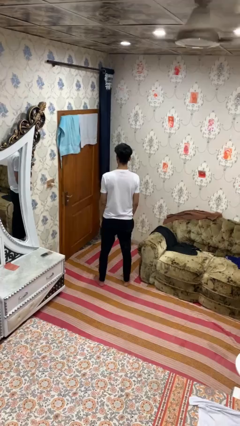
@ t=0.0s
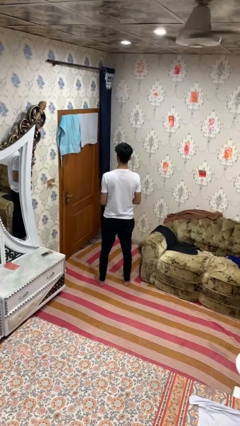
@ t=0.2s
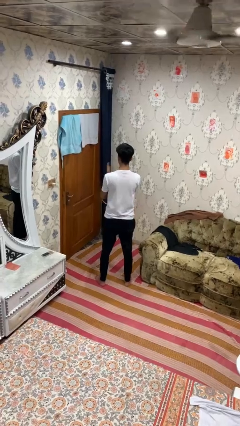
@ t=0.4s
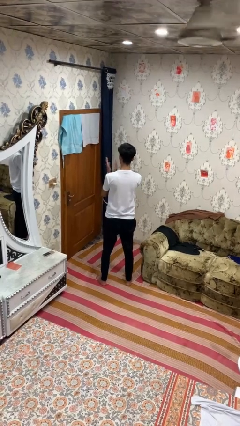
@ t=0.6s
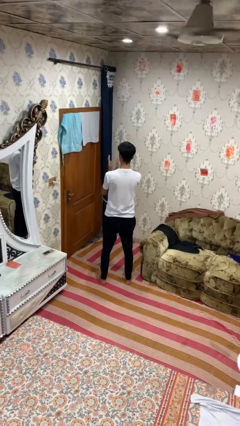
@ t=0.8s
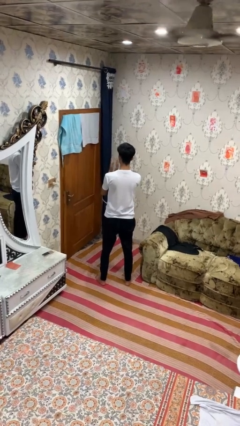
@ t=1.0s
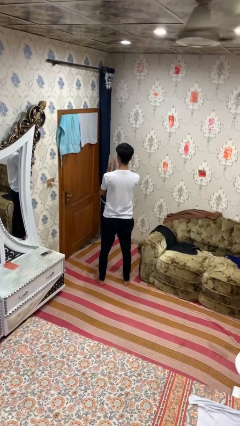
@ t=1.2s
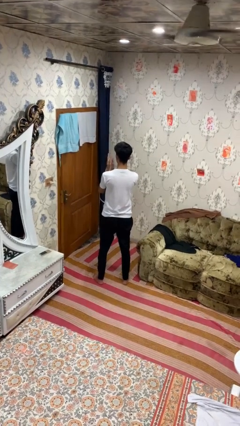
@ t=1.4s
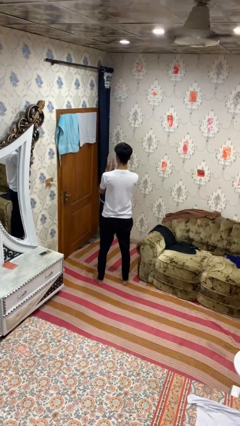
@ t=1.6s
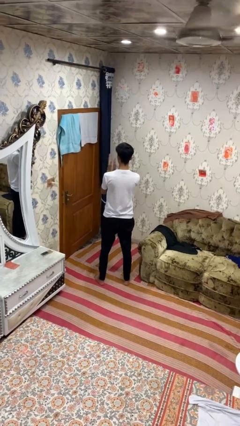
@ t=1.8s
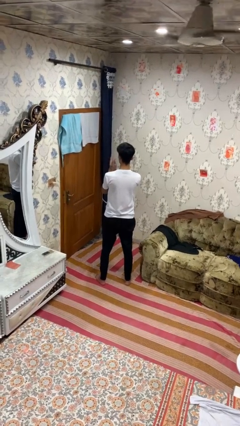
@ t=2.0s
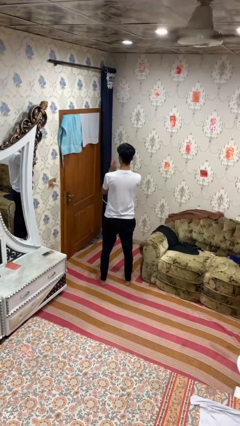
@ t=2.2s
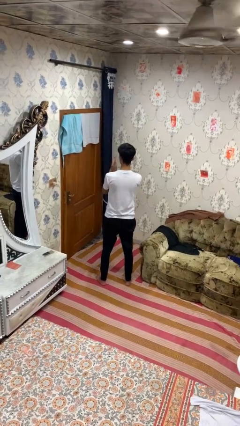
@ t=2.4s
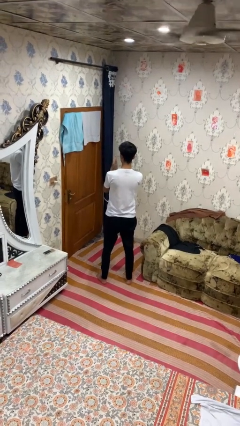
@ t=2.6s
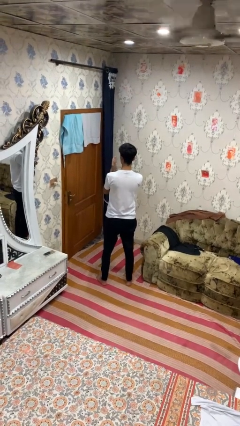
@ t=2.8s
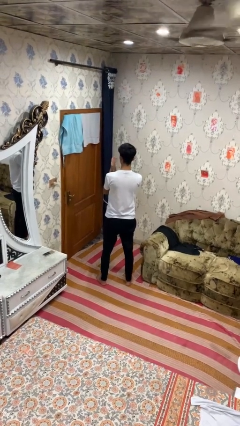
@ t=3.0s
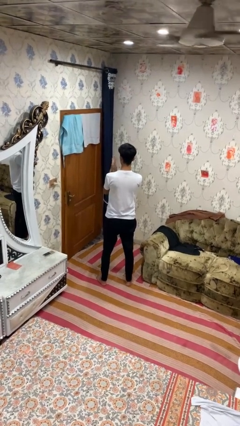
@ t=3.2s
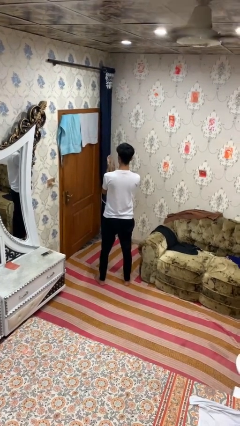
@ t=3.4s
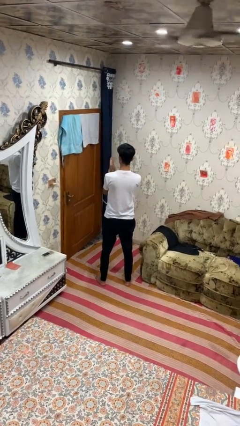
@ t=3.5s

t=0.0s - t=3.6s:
person claps hands

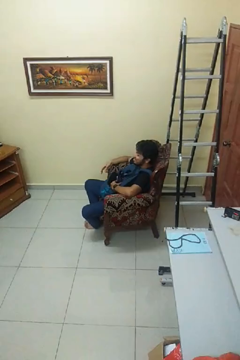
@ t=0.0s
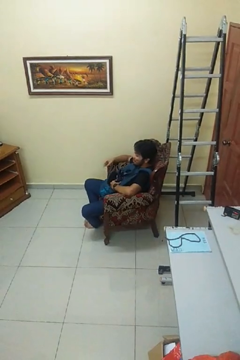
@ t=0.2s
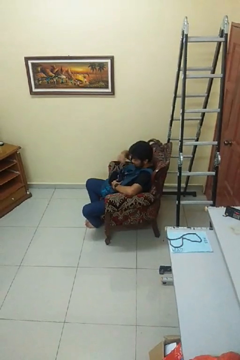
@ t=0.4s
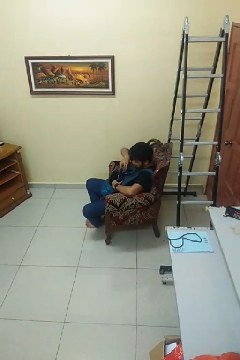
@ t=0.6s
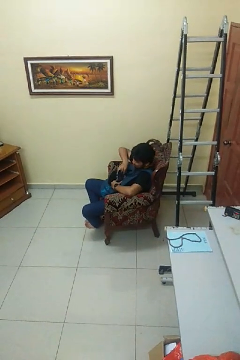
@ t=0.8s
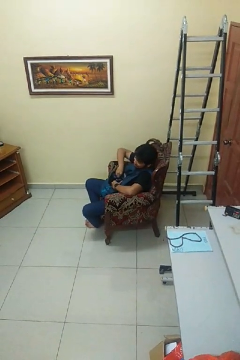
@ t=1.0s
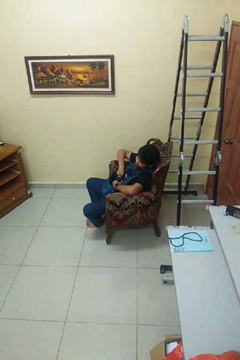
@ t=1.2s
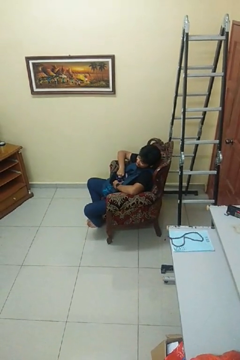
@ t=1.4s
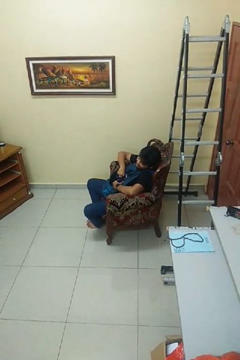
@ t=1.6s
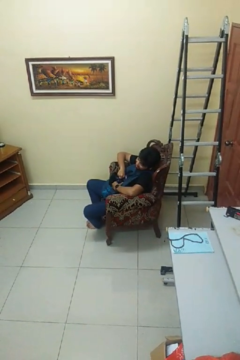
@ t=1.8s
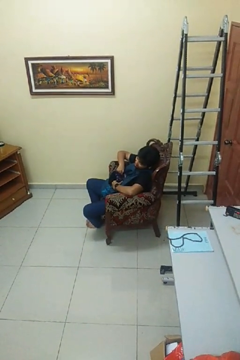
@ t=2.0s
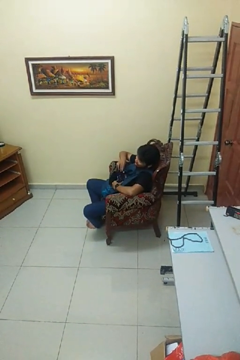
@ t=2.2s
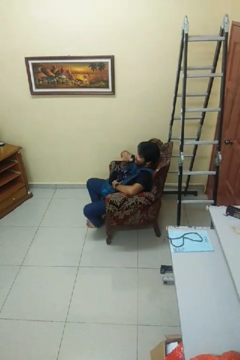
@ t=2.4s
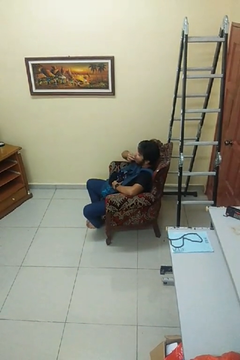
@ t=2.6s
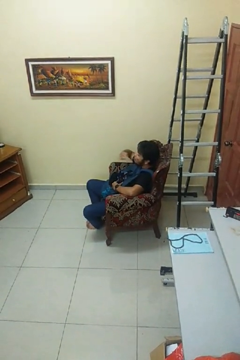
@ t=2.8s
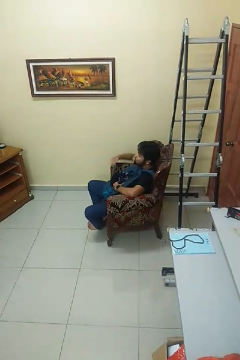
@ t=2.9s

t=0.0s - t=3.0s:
person eats snack from bag

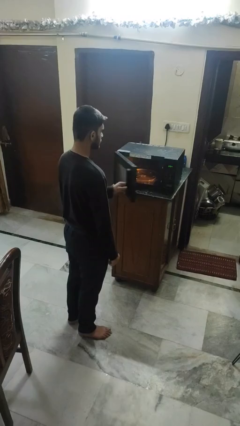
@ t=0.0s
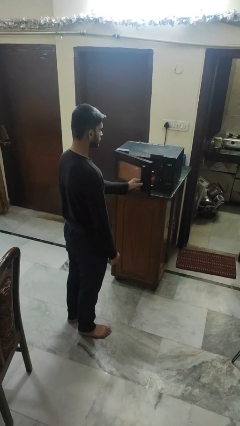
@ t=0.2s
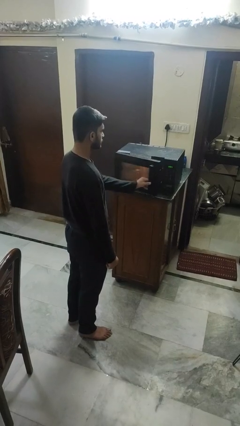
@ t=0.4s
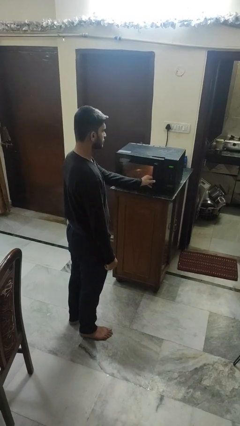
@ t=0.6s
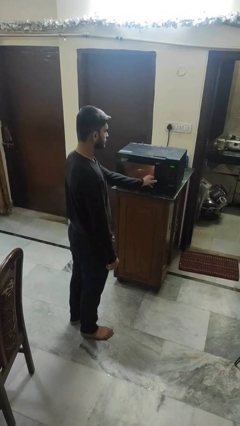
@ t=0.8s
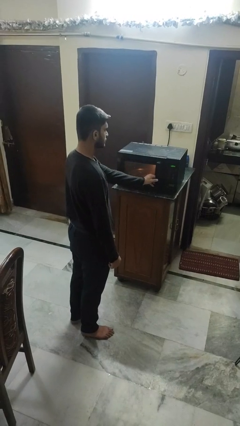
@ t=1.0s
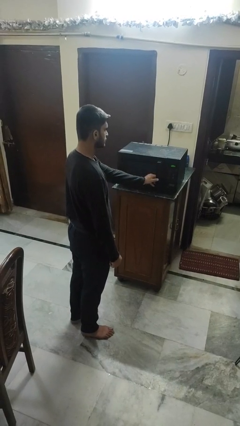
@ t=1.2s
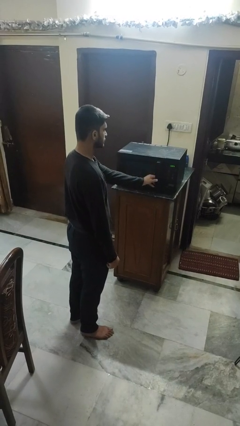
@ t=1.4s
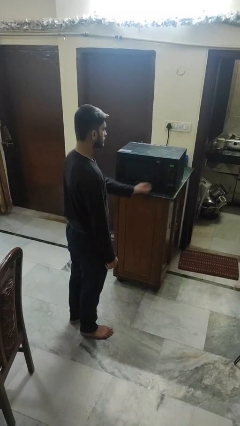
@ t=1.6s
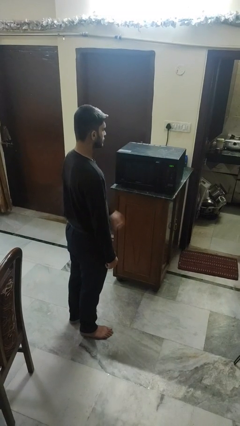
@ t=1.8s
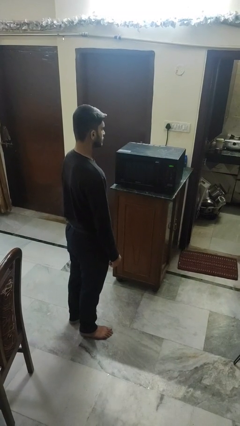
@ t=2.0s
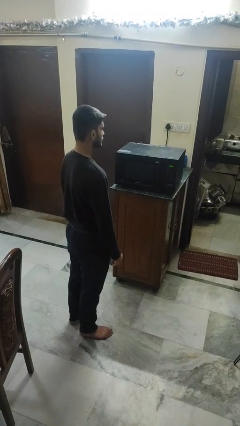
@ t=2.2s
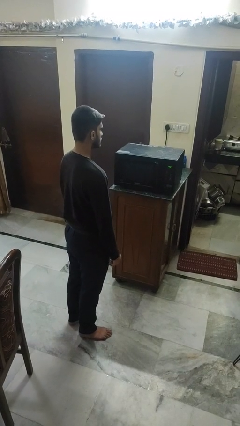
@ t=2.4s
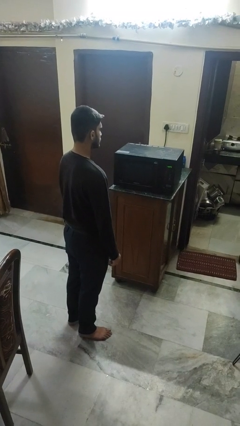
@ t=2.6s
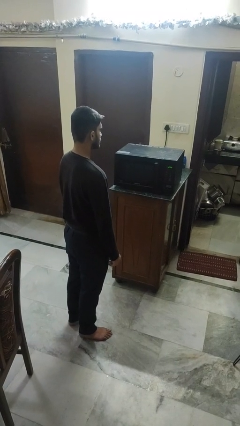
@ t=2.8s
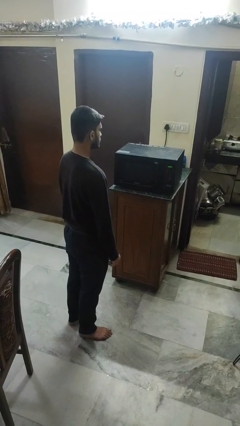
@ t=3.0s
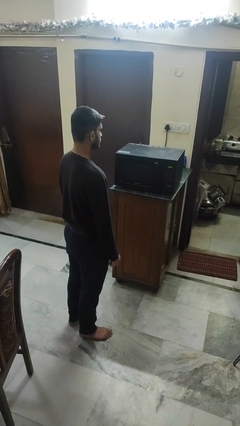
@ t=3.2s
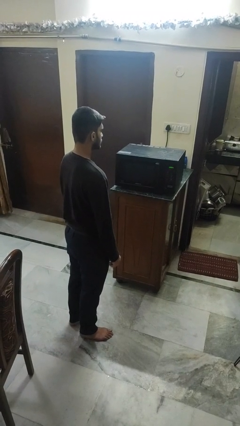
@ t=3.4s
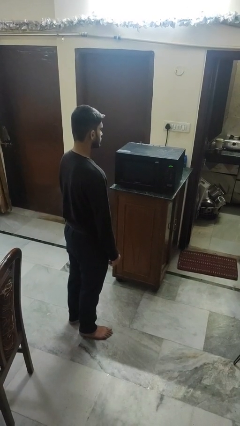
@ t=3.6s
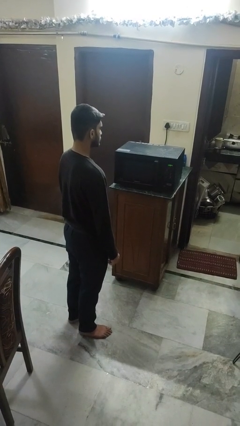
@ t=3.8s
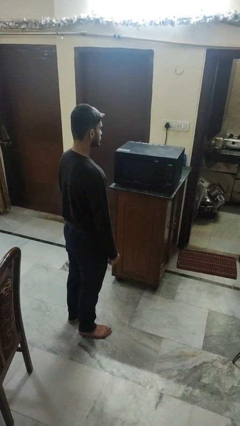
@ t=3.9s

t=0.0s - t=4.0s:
person closes oven door

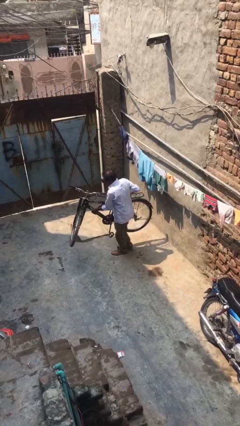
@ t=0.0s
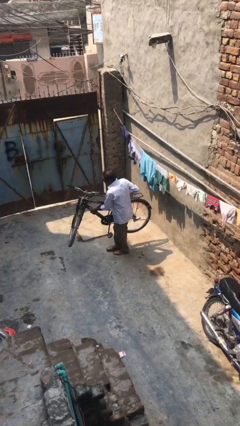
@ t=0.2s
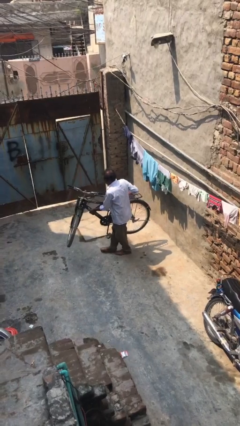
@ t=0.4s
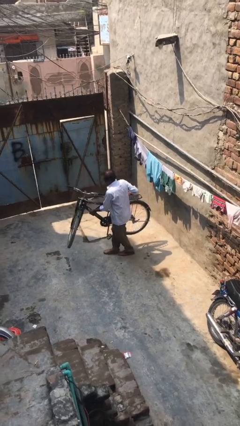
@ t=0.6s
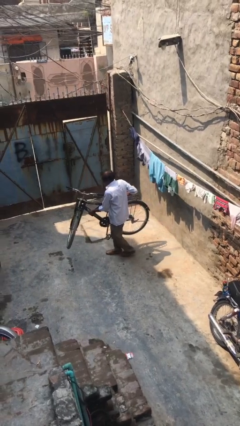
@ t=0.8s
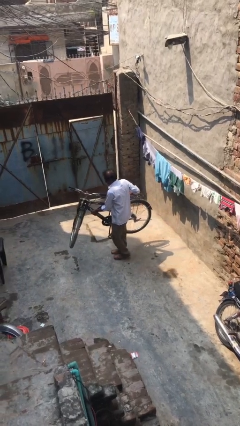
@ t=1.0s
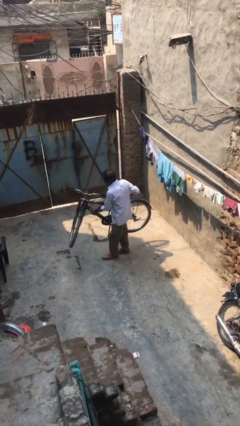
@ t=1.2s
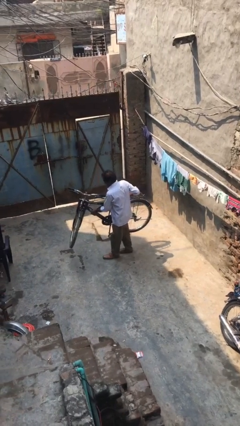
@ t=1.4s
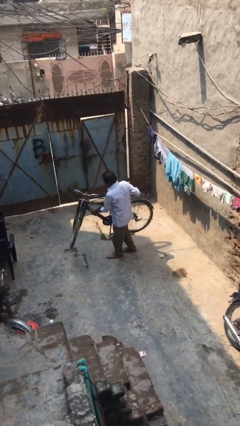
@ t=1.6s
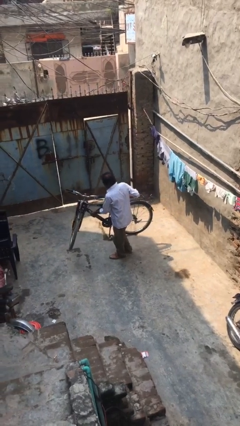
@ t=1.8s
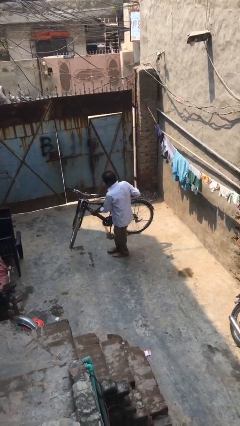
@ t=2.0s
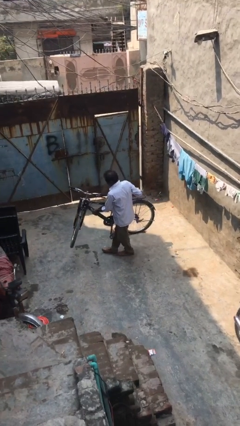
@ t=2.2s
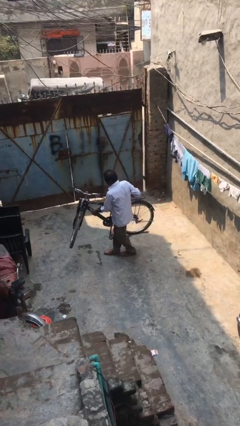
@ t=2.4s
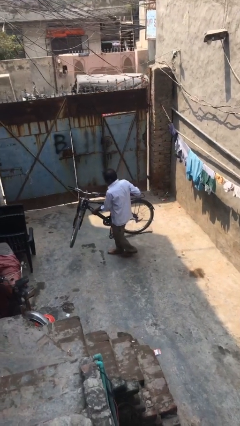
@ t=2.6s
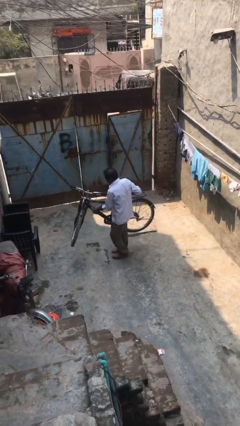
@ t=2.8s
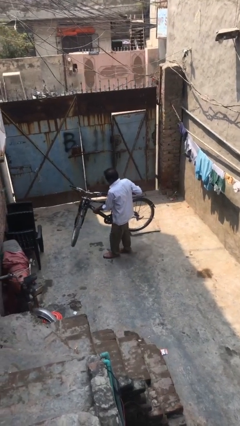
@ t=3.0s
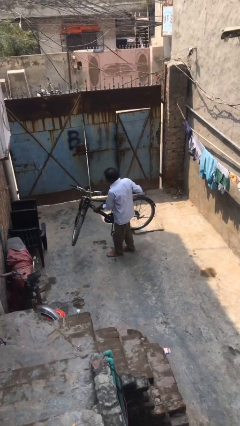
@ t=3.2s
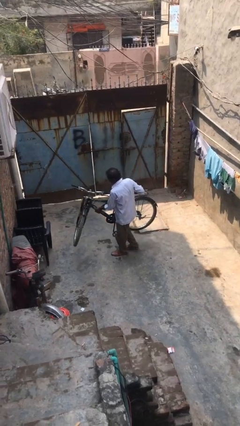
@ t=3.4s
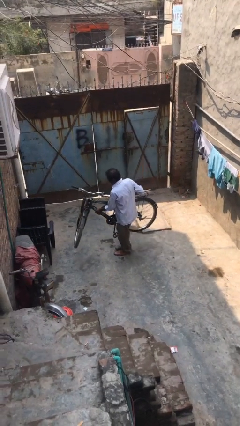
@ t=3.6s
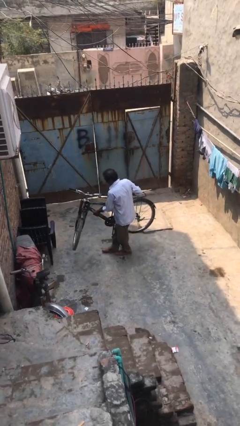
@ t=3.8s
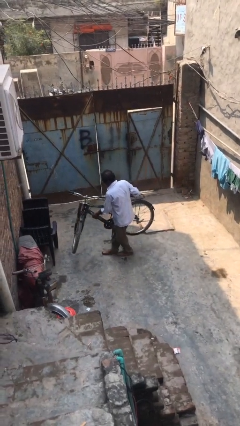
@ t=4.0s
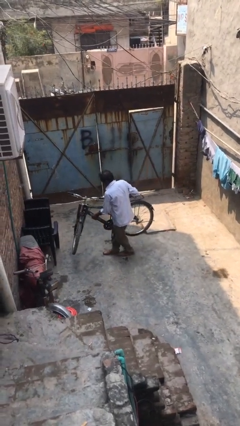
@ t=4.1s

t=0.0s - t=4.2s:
person carries heavy object

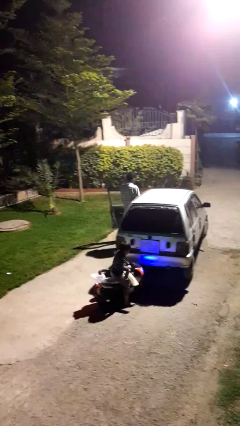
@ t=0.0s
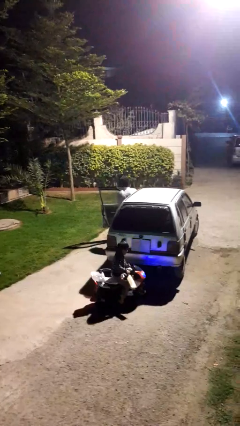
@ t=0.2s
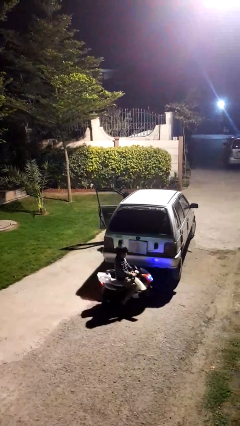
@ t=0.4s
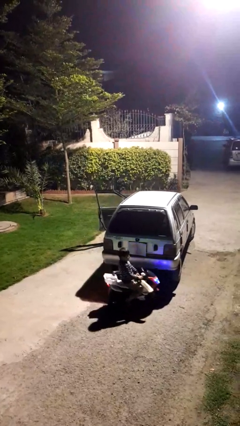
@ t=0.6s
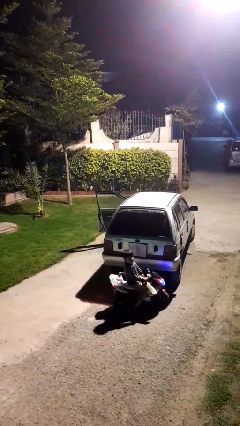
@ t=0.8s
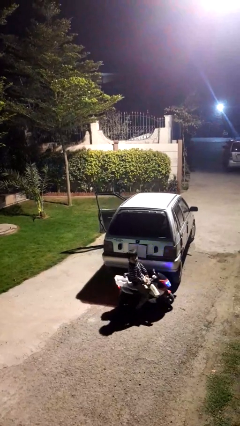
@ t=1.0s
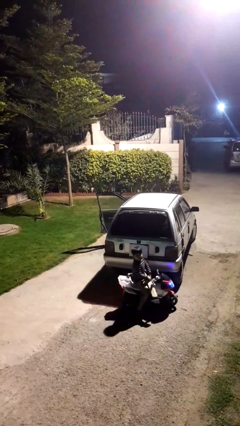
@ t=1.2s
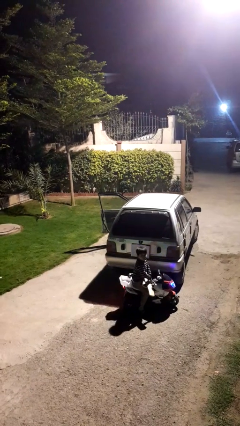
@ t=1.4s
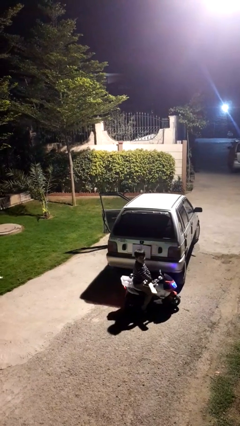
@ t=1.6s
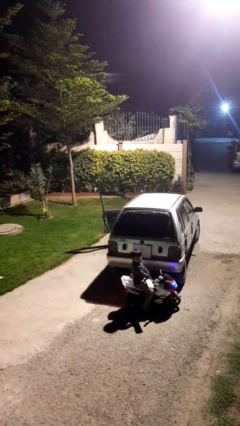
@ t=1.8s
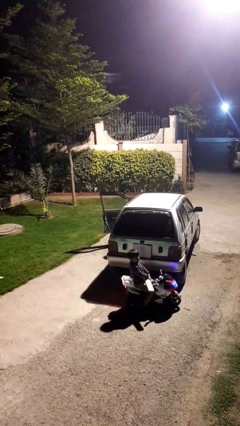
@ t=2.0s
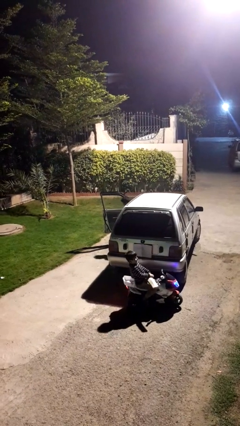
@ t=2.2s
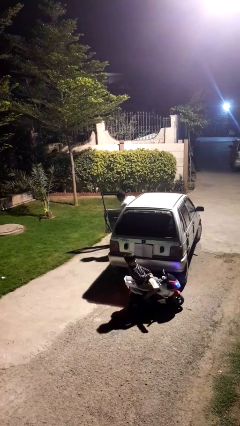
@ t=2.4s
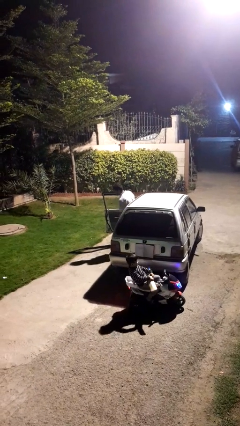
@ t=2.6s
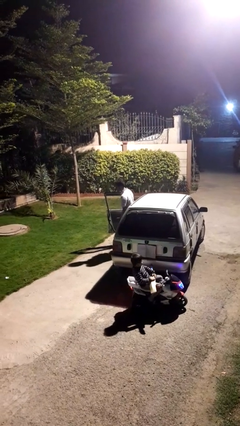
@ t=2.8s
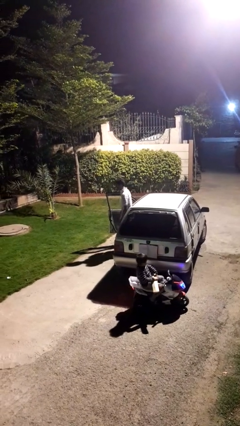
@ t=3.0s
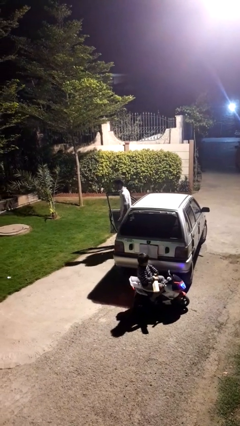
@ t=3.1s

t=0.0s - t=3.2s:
person enters car

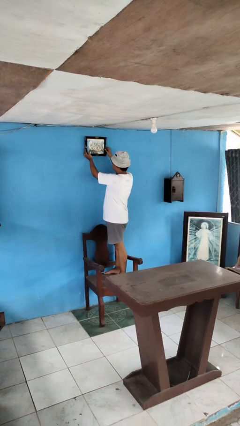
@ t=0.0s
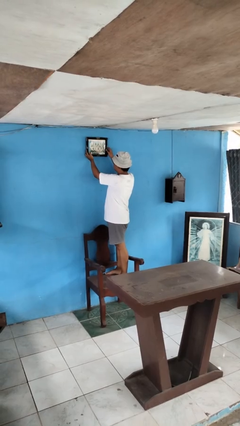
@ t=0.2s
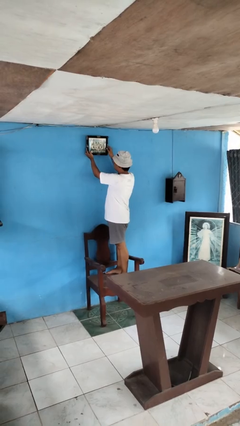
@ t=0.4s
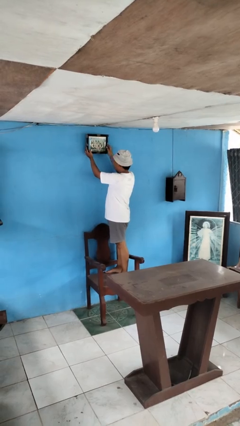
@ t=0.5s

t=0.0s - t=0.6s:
person takes down picture frame
